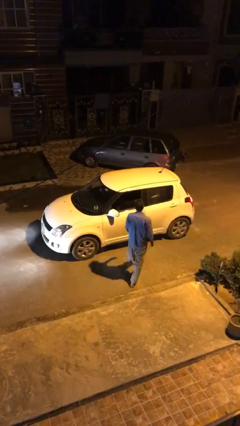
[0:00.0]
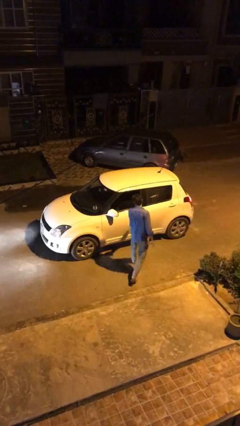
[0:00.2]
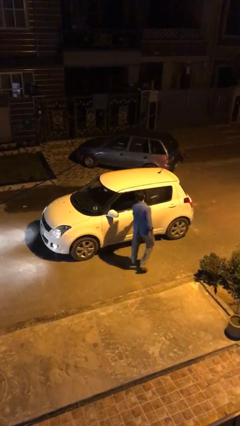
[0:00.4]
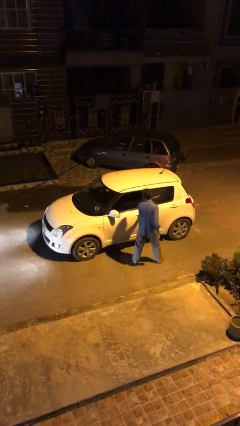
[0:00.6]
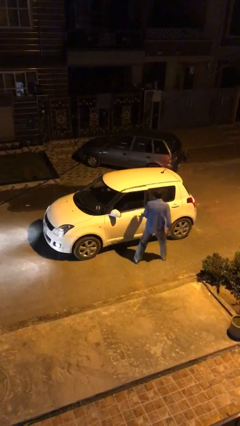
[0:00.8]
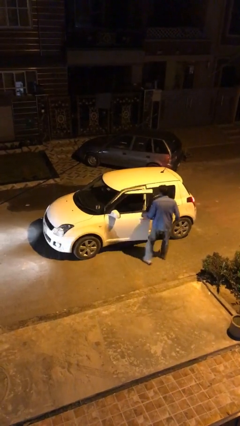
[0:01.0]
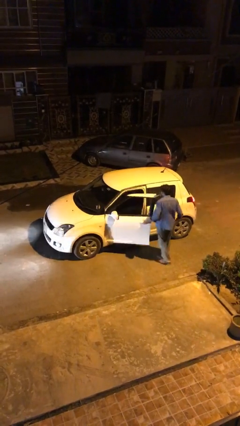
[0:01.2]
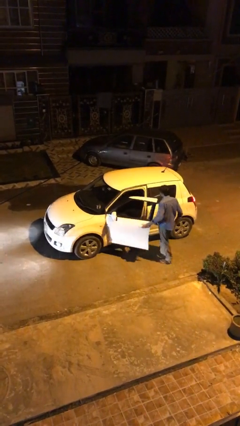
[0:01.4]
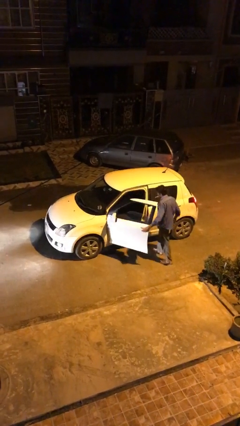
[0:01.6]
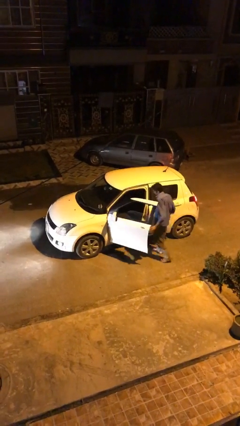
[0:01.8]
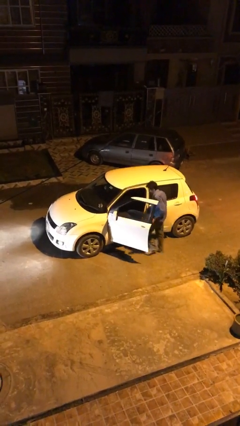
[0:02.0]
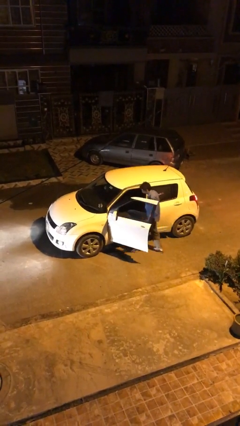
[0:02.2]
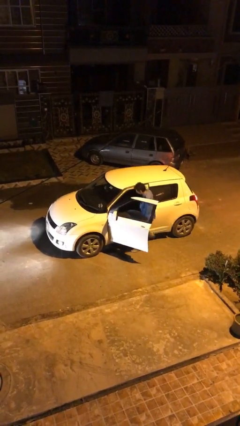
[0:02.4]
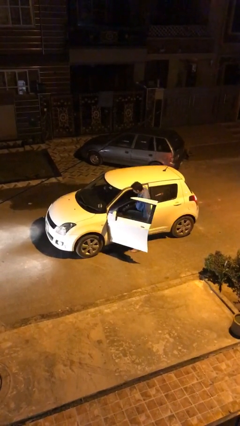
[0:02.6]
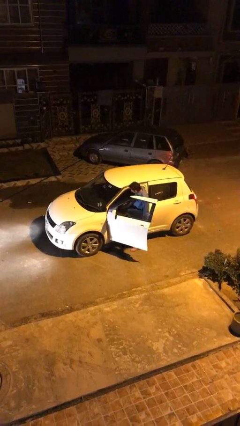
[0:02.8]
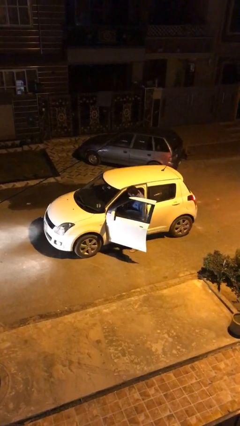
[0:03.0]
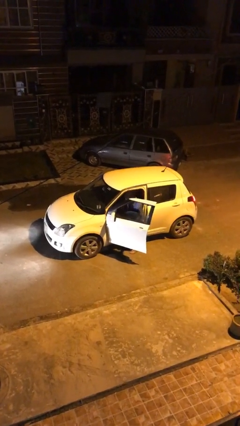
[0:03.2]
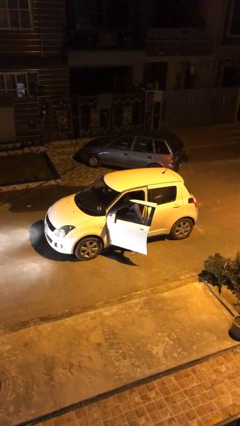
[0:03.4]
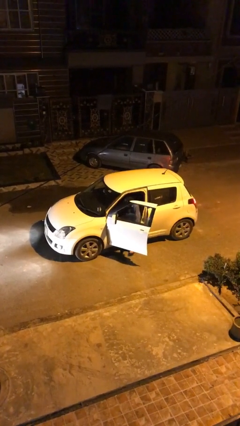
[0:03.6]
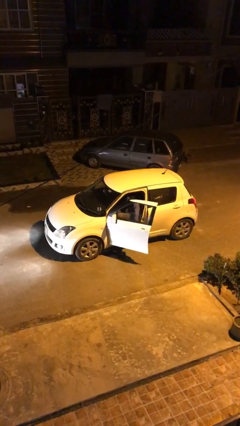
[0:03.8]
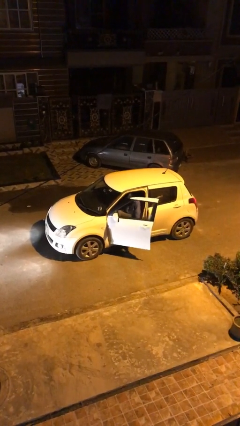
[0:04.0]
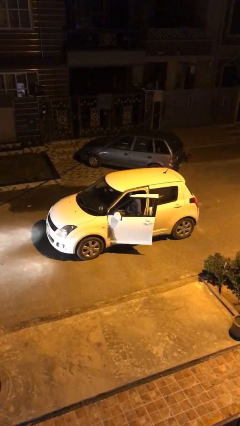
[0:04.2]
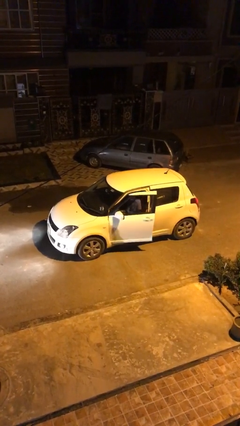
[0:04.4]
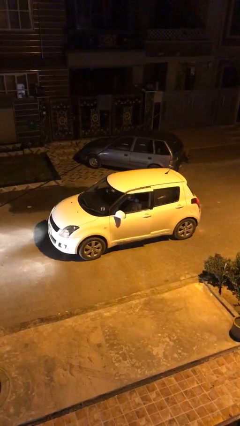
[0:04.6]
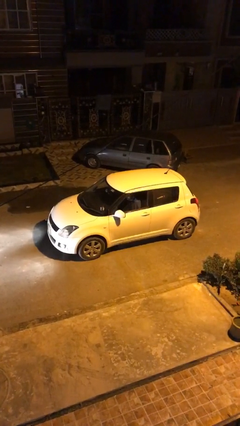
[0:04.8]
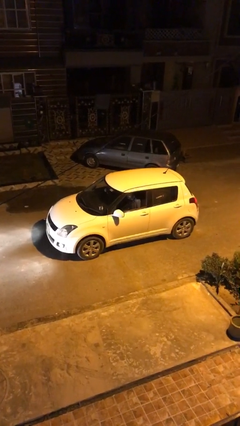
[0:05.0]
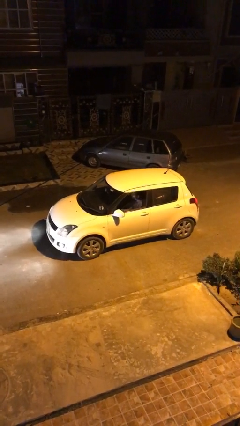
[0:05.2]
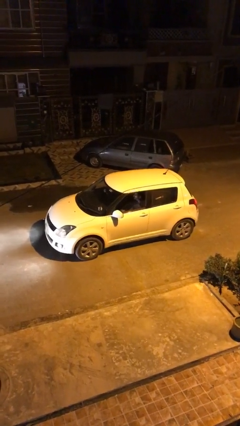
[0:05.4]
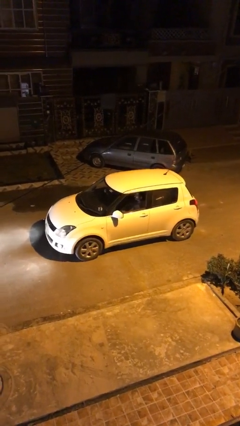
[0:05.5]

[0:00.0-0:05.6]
car picks up person

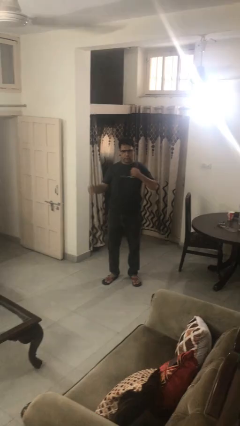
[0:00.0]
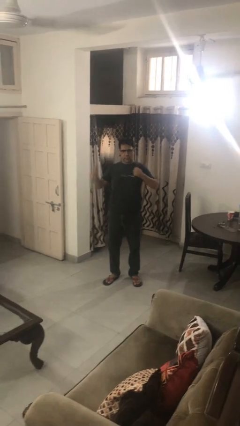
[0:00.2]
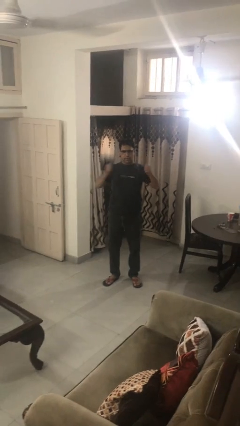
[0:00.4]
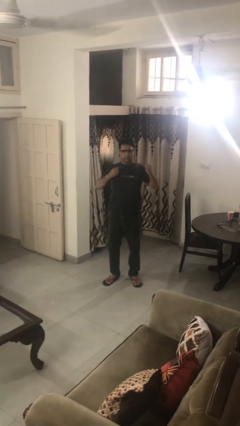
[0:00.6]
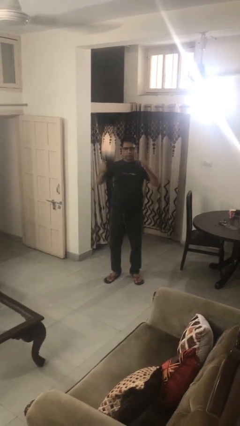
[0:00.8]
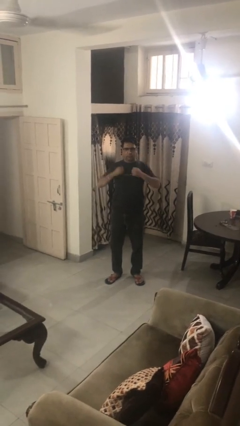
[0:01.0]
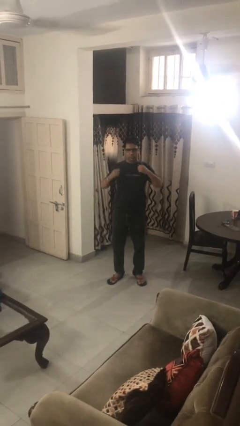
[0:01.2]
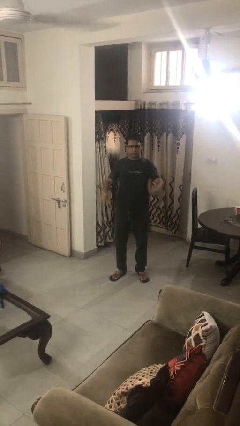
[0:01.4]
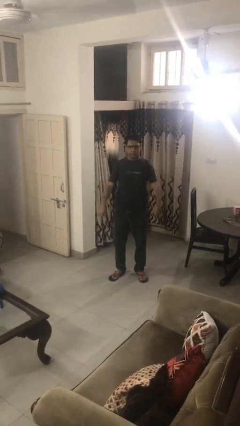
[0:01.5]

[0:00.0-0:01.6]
person drums on chest

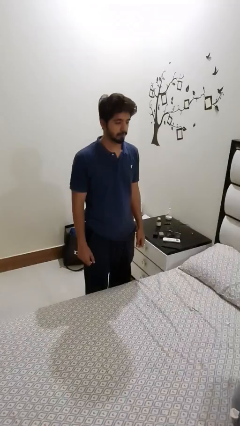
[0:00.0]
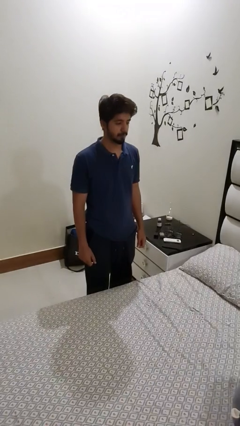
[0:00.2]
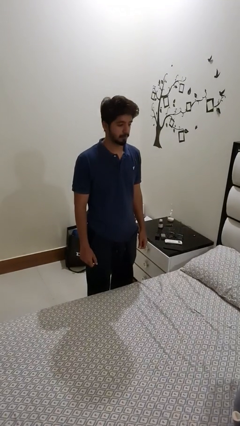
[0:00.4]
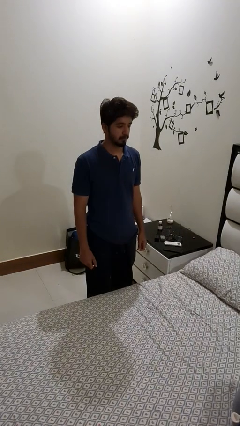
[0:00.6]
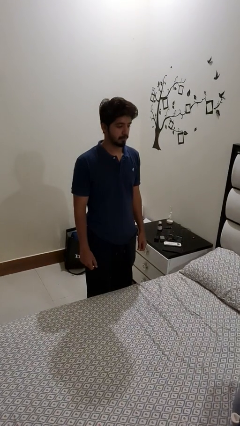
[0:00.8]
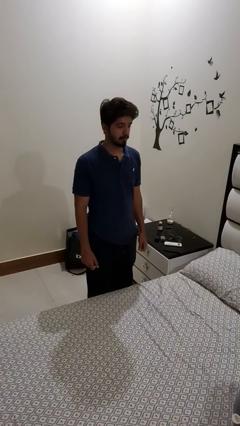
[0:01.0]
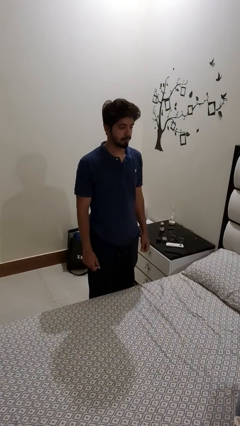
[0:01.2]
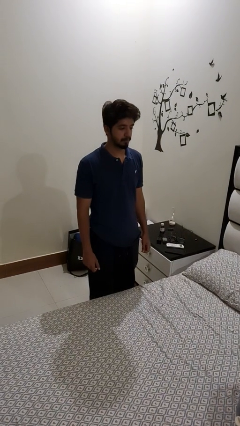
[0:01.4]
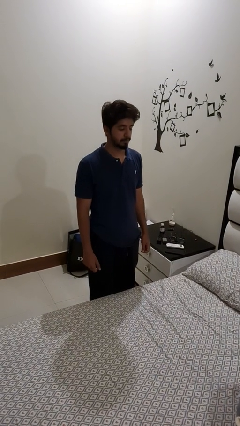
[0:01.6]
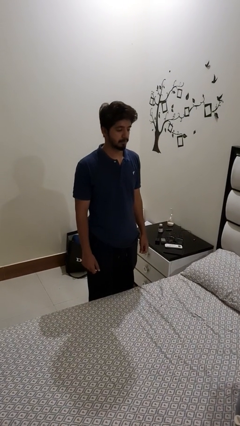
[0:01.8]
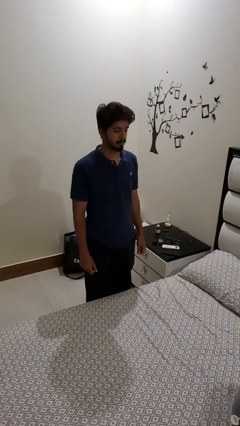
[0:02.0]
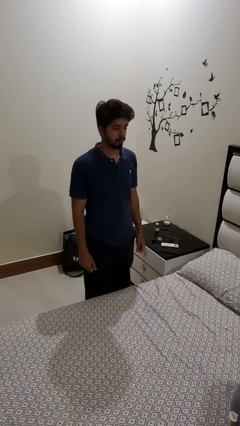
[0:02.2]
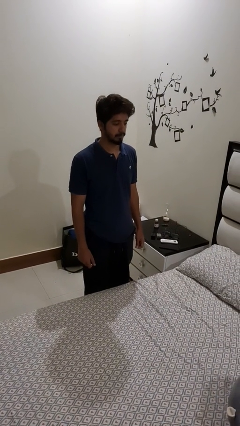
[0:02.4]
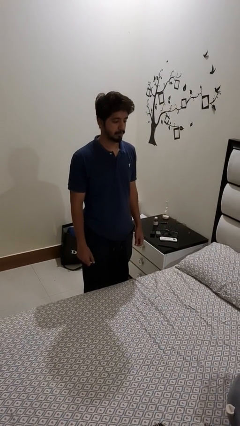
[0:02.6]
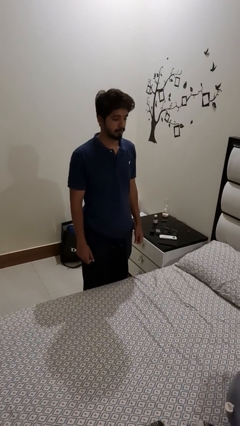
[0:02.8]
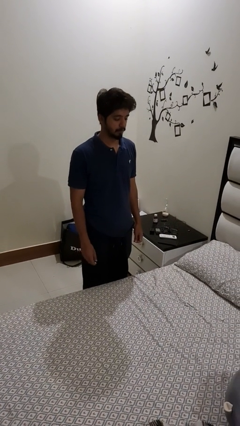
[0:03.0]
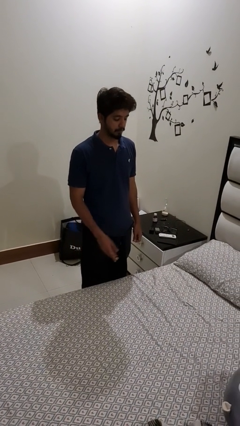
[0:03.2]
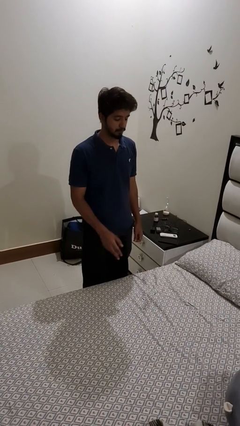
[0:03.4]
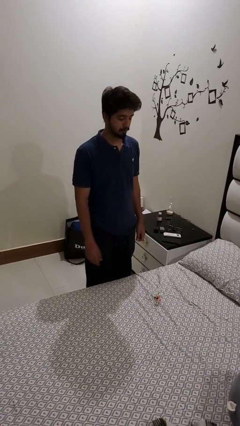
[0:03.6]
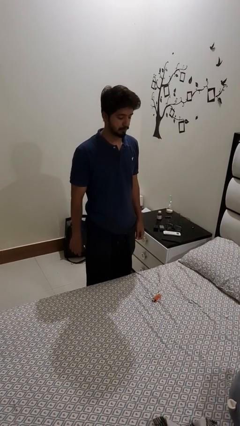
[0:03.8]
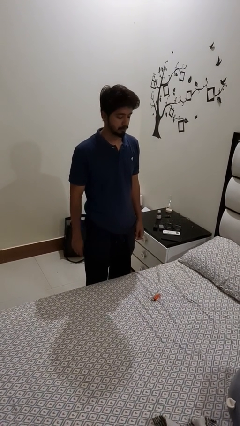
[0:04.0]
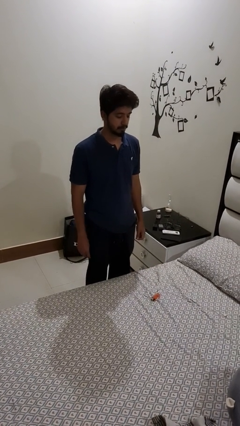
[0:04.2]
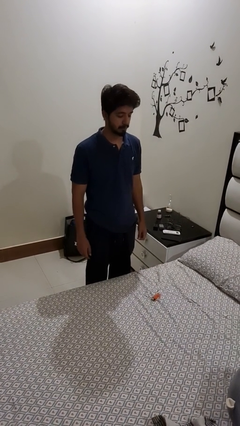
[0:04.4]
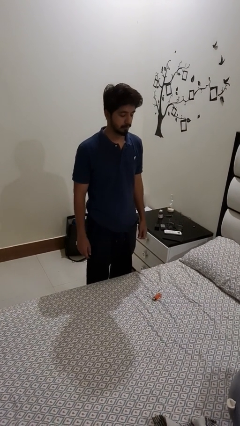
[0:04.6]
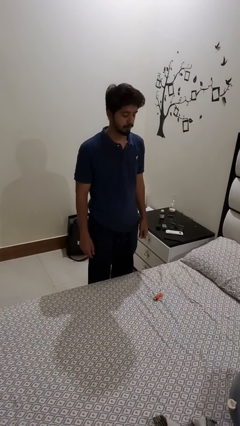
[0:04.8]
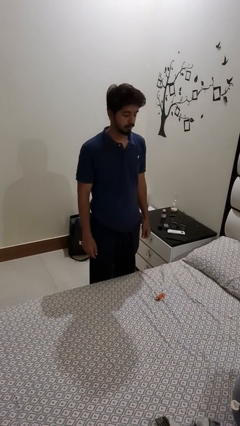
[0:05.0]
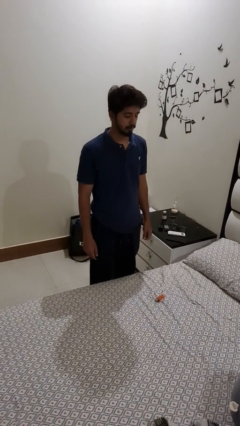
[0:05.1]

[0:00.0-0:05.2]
person throws object on bed

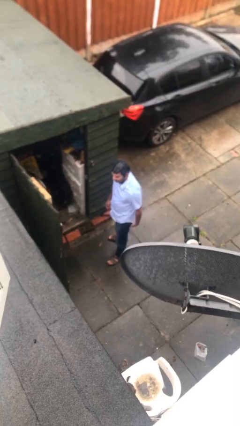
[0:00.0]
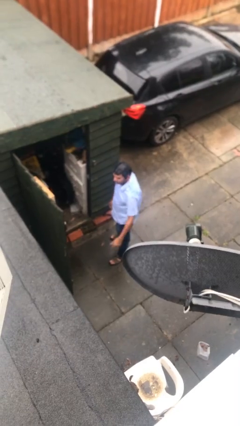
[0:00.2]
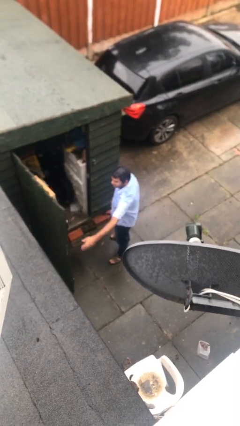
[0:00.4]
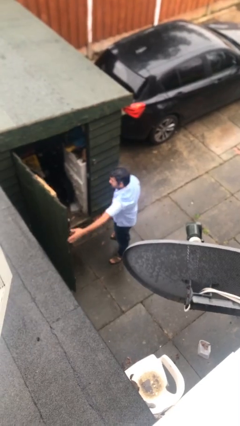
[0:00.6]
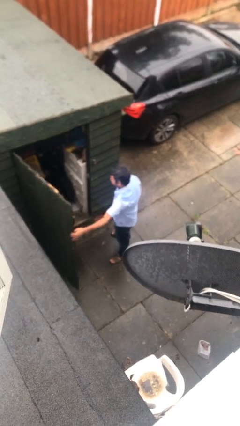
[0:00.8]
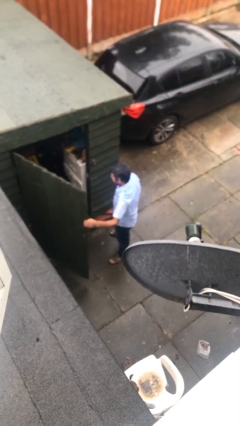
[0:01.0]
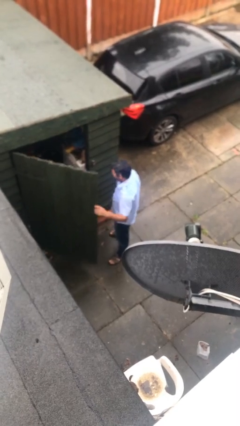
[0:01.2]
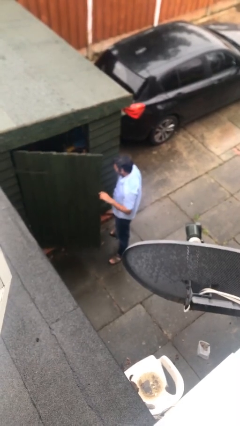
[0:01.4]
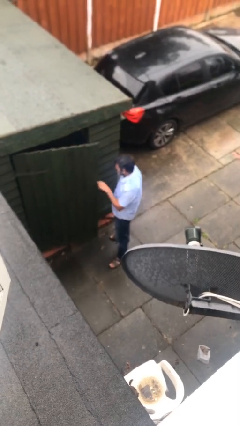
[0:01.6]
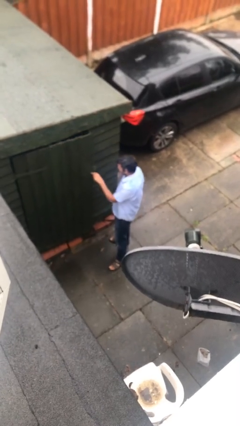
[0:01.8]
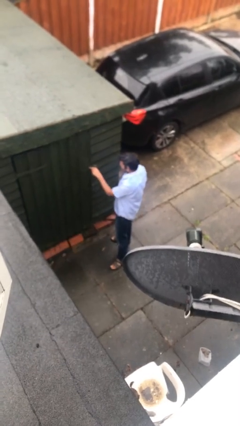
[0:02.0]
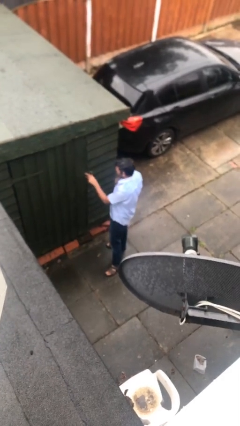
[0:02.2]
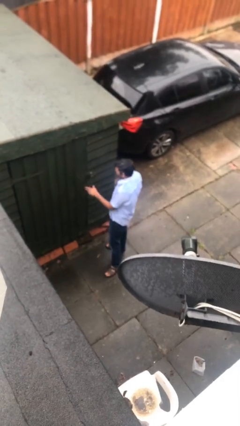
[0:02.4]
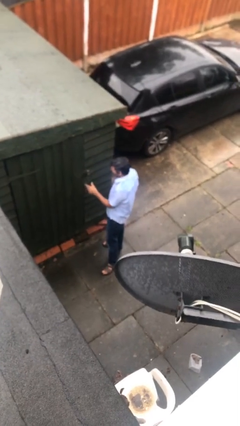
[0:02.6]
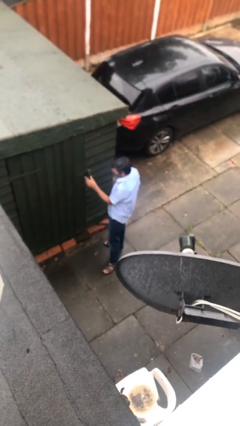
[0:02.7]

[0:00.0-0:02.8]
person closes facility door

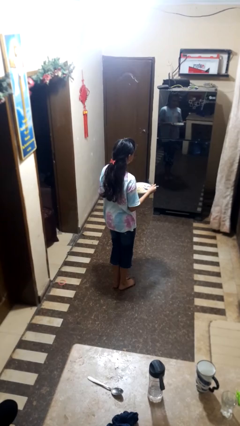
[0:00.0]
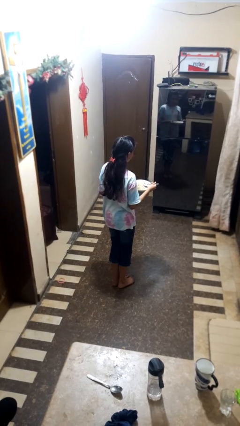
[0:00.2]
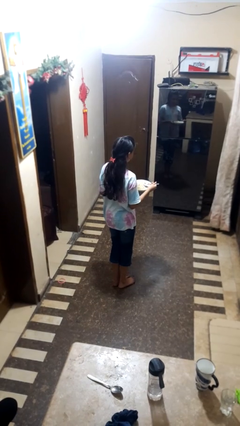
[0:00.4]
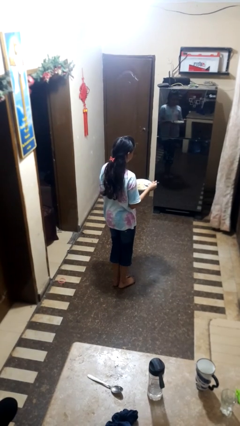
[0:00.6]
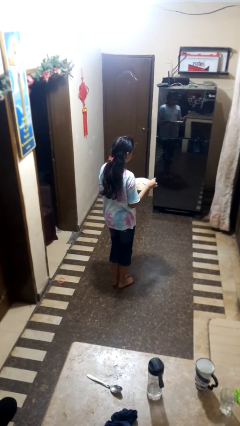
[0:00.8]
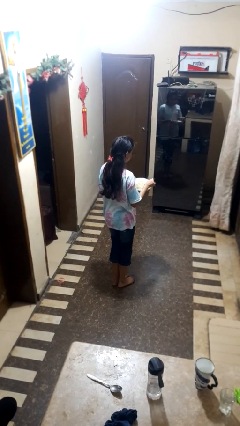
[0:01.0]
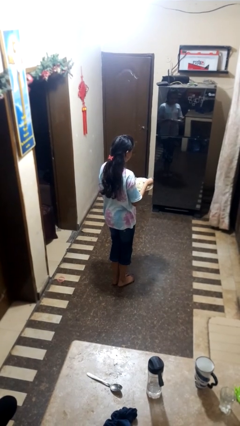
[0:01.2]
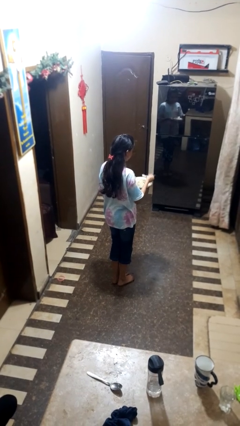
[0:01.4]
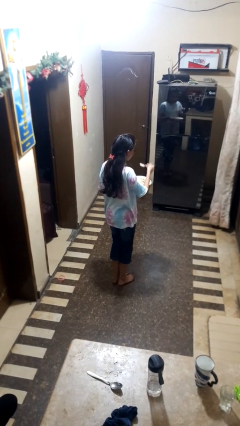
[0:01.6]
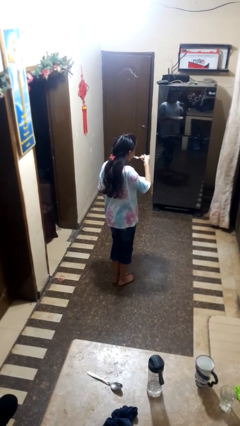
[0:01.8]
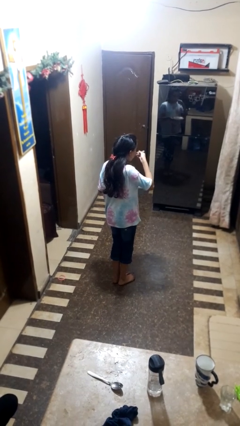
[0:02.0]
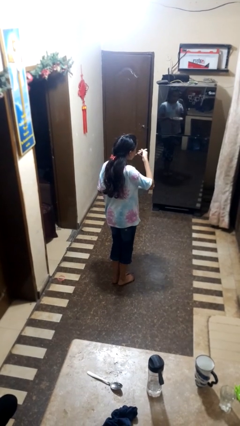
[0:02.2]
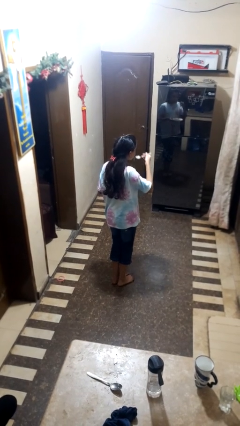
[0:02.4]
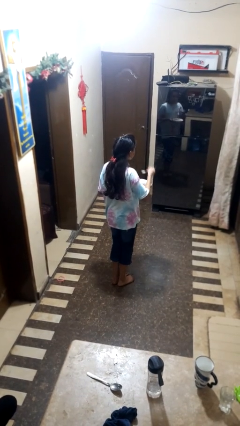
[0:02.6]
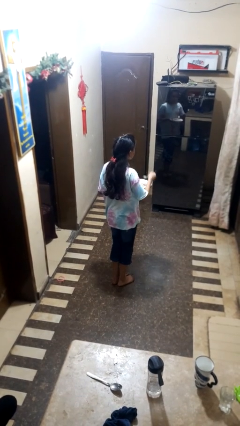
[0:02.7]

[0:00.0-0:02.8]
person eats with utensil
